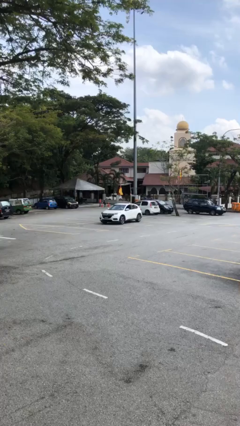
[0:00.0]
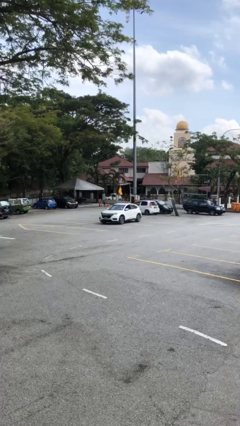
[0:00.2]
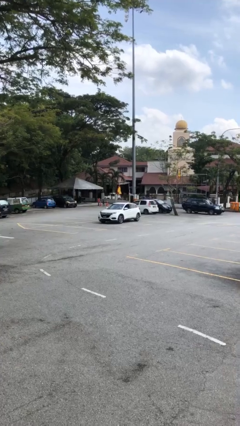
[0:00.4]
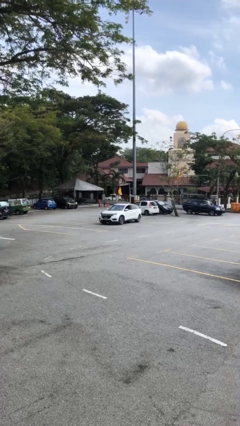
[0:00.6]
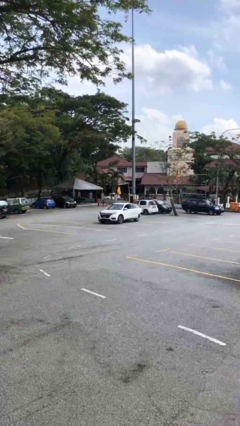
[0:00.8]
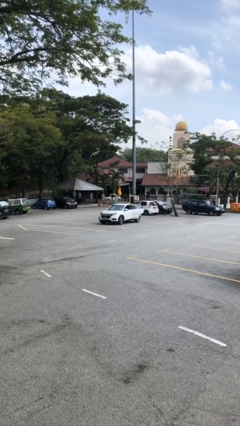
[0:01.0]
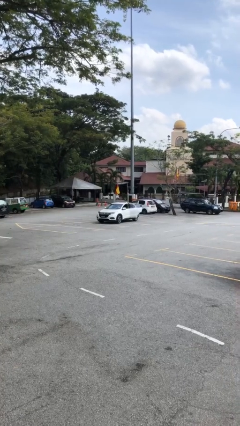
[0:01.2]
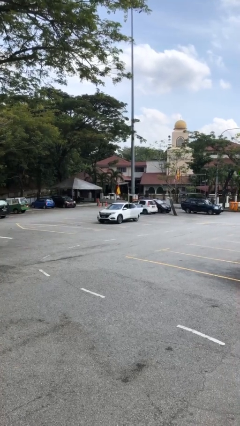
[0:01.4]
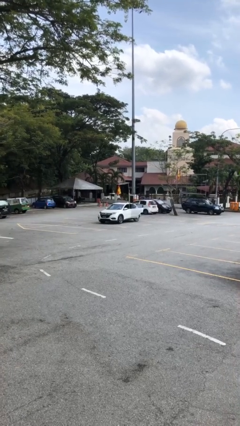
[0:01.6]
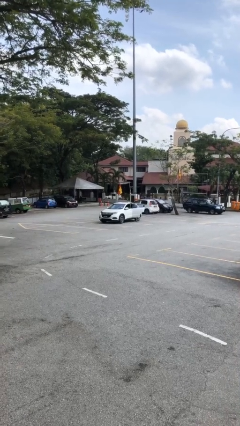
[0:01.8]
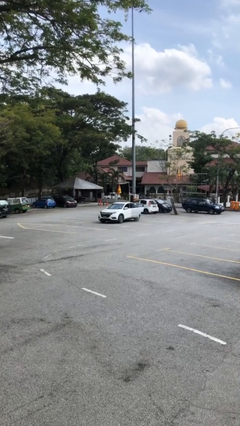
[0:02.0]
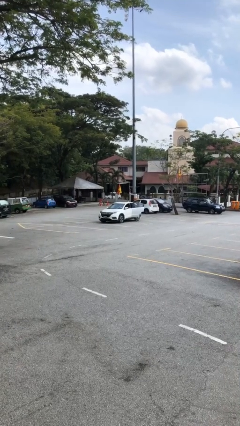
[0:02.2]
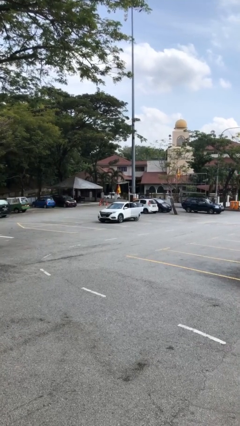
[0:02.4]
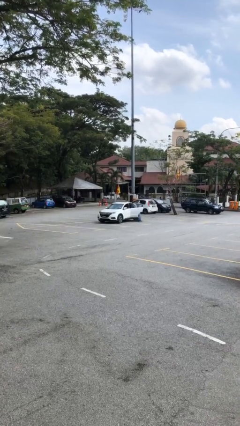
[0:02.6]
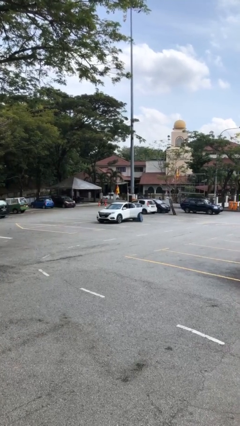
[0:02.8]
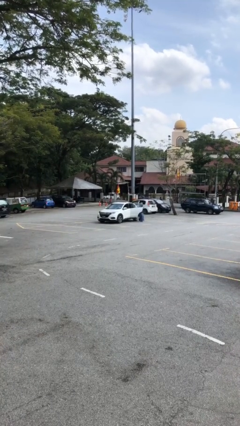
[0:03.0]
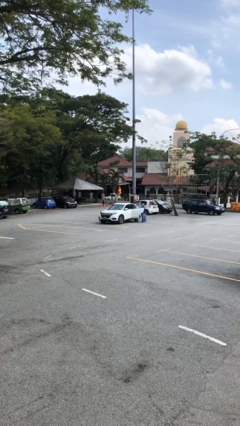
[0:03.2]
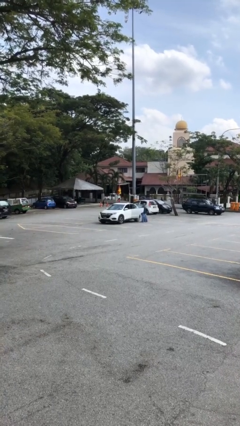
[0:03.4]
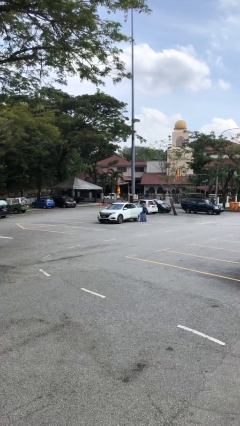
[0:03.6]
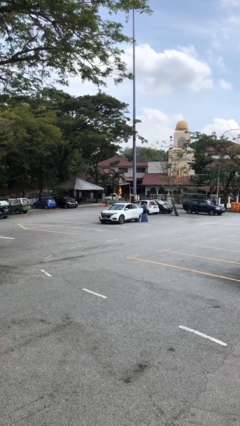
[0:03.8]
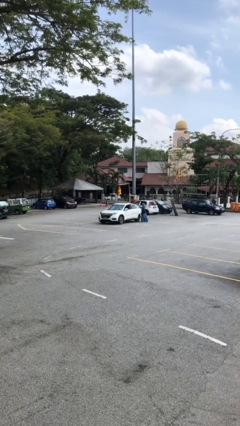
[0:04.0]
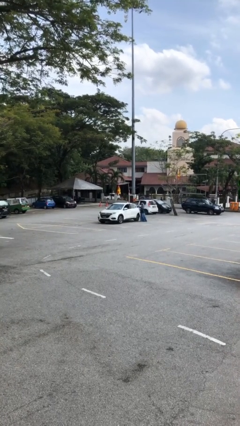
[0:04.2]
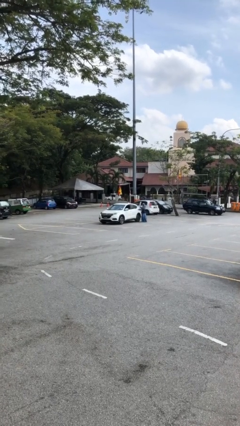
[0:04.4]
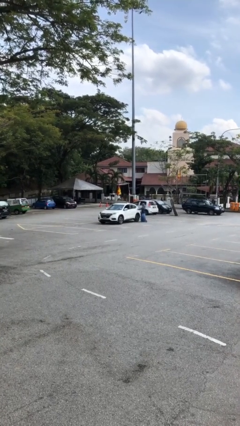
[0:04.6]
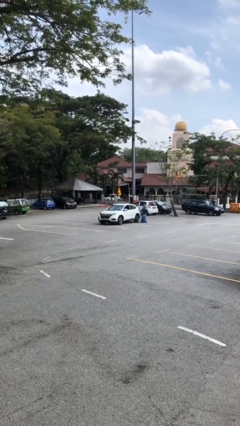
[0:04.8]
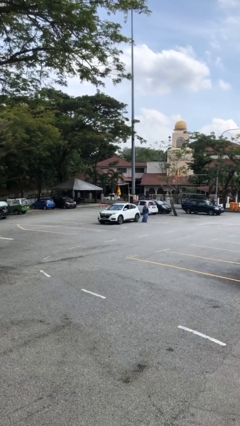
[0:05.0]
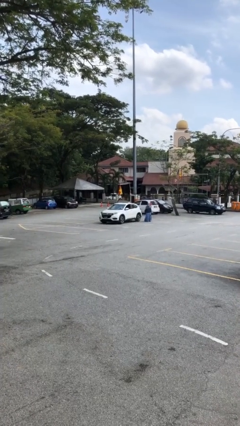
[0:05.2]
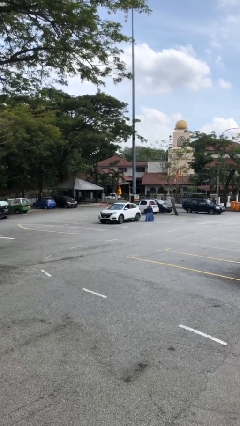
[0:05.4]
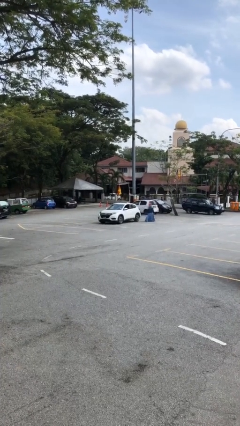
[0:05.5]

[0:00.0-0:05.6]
car drops off person

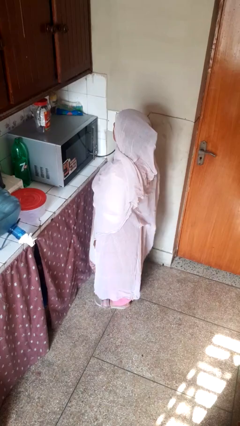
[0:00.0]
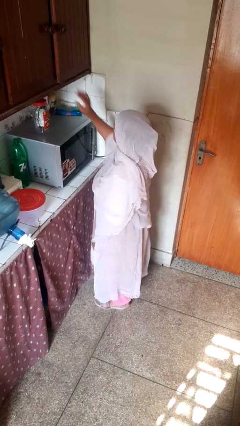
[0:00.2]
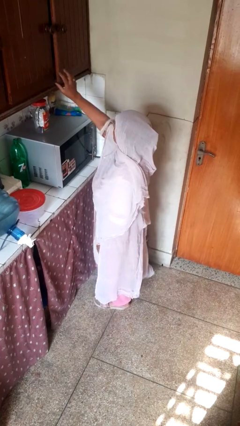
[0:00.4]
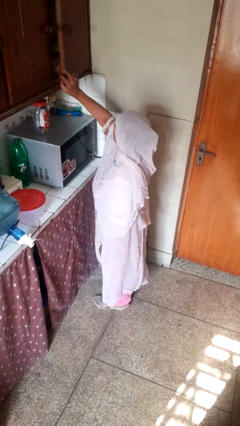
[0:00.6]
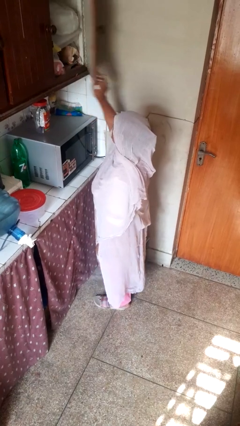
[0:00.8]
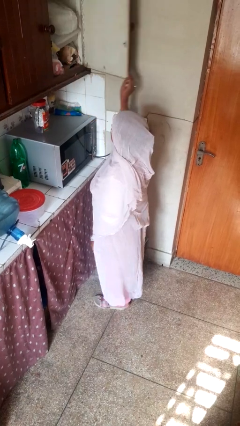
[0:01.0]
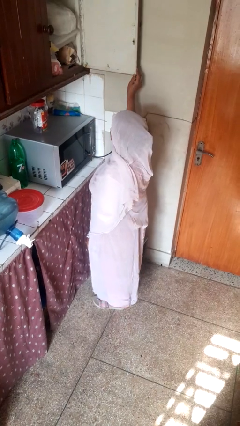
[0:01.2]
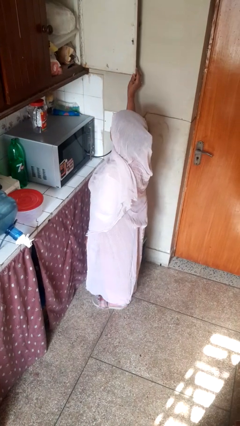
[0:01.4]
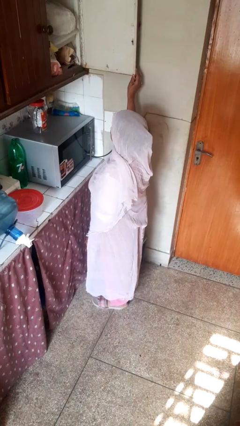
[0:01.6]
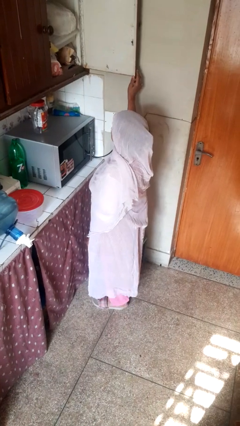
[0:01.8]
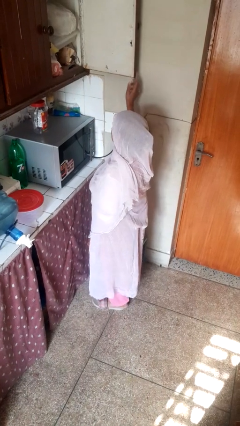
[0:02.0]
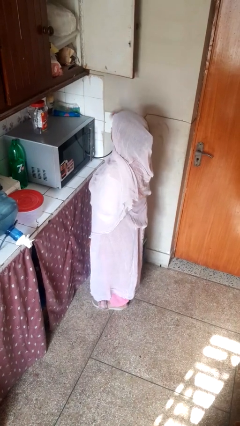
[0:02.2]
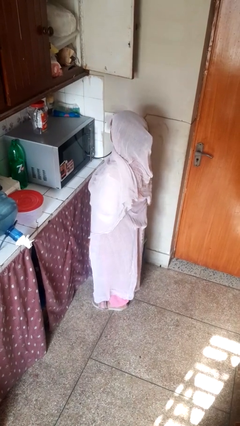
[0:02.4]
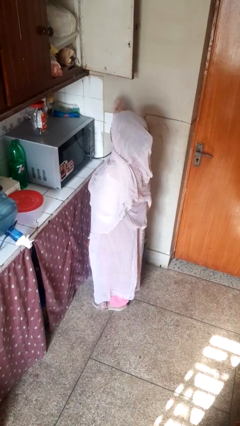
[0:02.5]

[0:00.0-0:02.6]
person opens cabinet

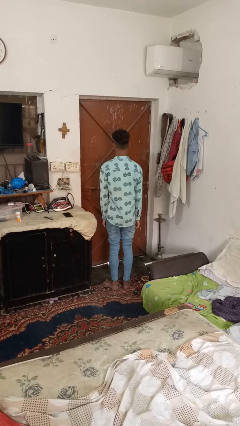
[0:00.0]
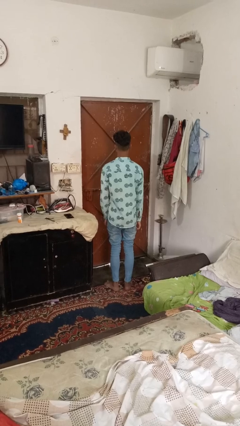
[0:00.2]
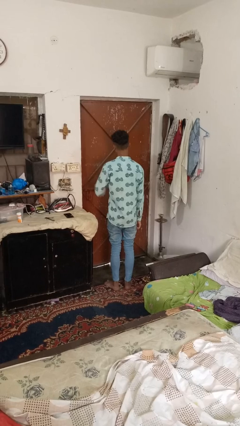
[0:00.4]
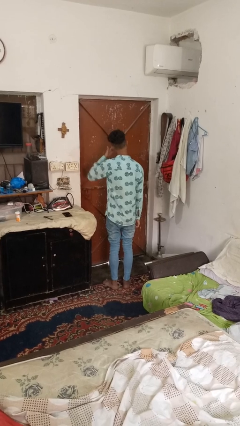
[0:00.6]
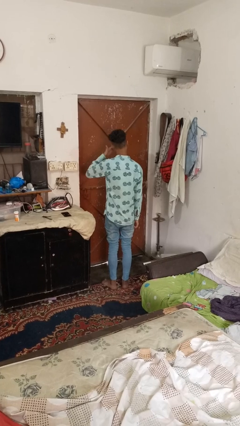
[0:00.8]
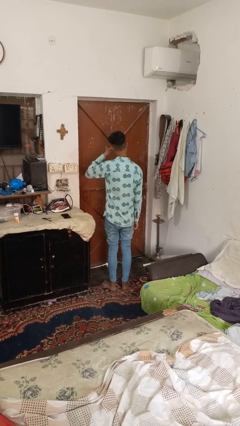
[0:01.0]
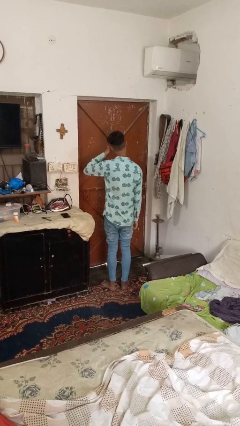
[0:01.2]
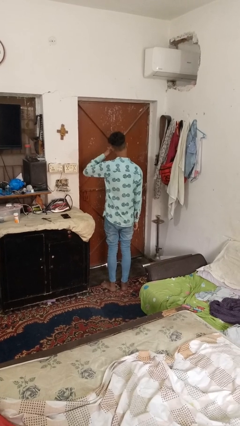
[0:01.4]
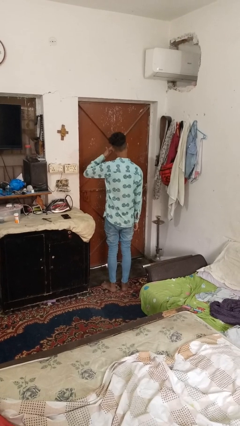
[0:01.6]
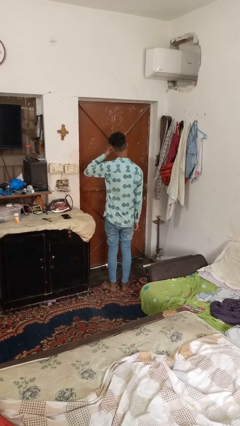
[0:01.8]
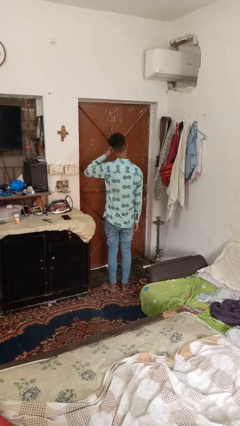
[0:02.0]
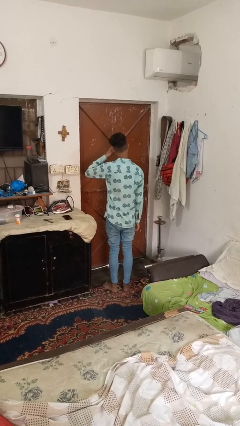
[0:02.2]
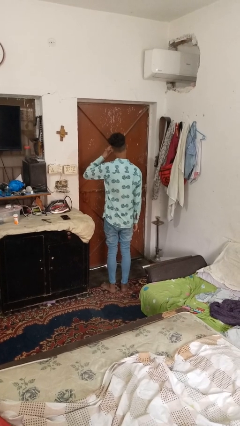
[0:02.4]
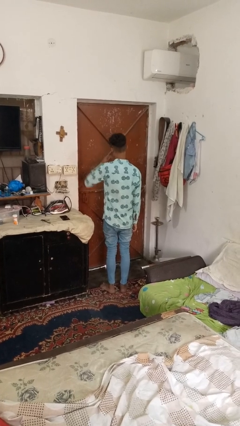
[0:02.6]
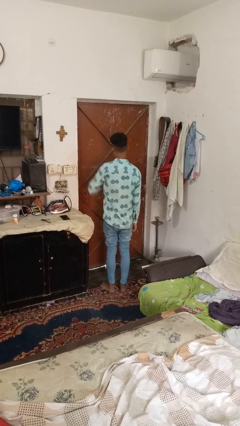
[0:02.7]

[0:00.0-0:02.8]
person rubs eyes

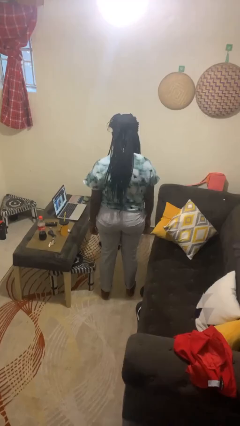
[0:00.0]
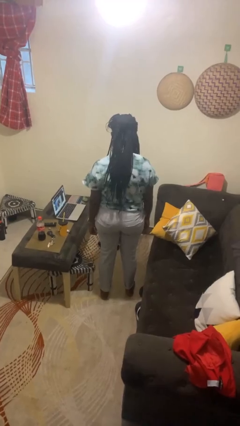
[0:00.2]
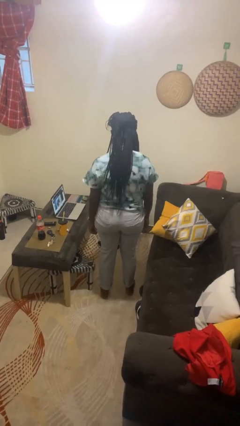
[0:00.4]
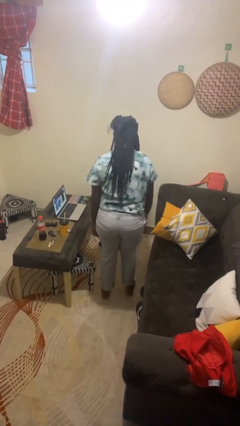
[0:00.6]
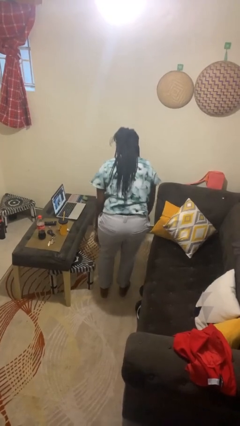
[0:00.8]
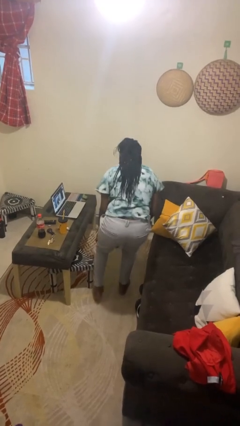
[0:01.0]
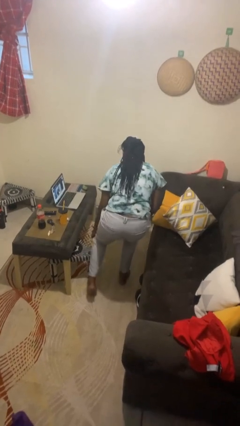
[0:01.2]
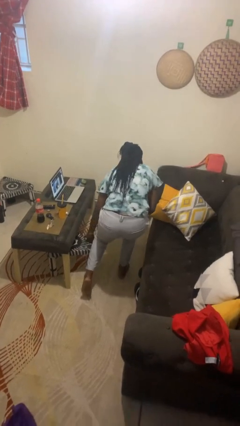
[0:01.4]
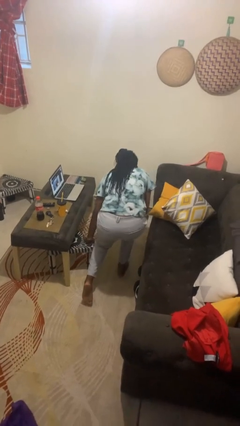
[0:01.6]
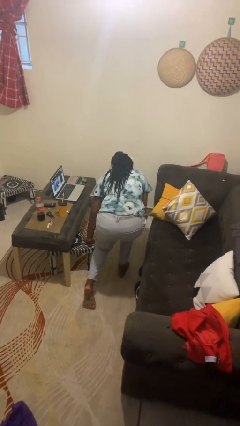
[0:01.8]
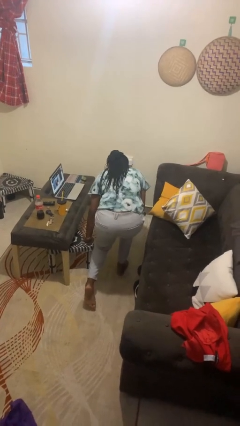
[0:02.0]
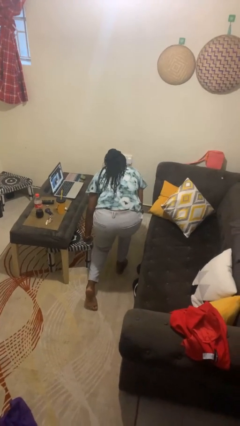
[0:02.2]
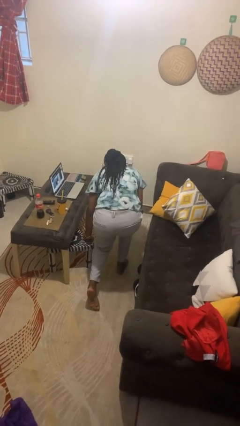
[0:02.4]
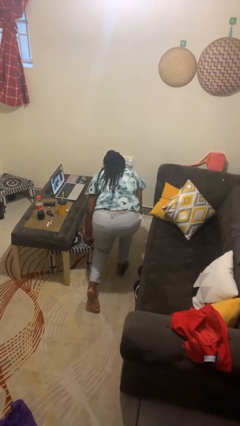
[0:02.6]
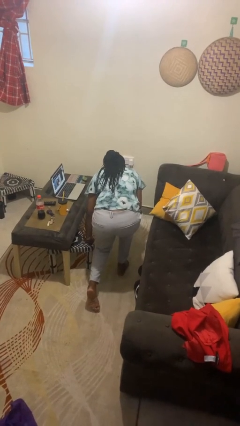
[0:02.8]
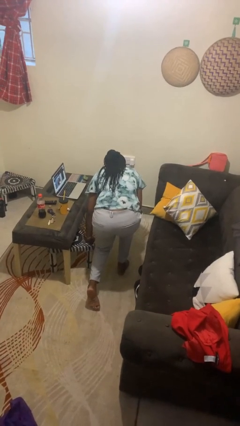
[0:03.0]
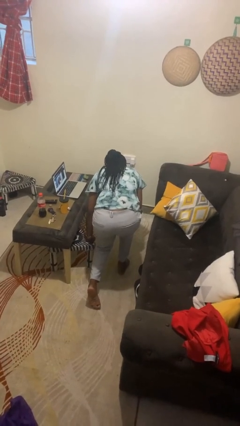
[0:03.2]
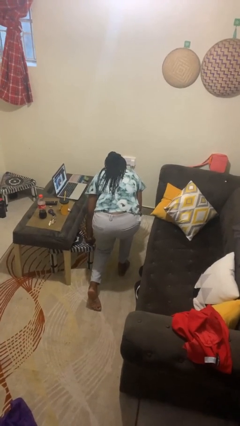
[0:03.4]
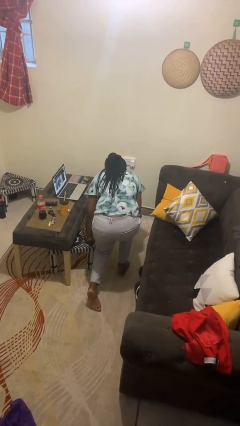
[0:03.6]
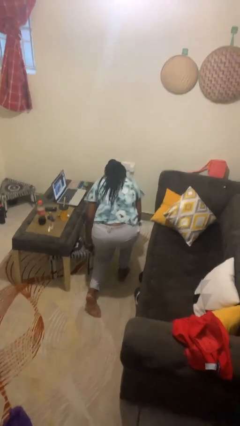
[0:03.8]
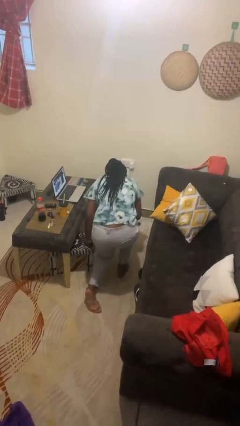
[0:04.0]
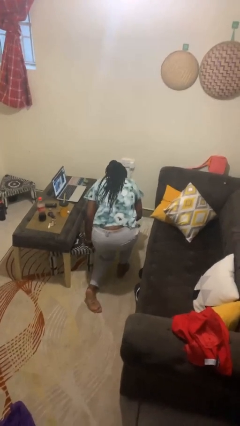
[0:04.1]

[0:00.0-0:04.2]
person trips on object on floor

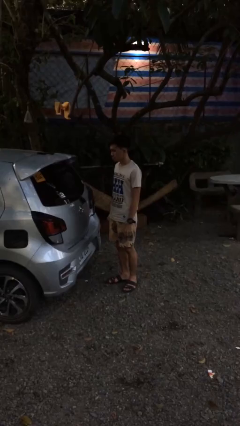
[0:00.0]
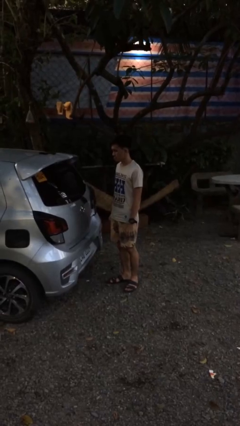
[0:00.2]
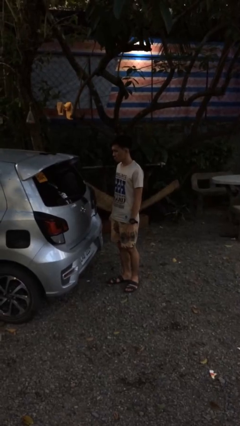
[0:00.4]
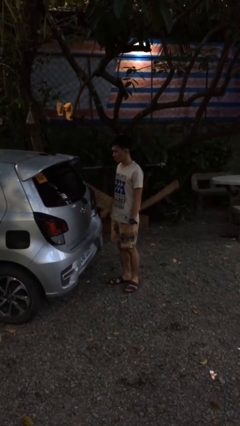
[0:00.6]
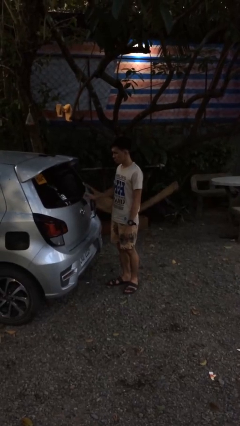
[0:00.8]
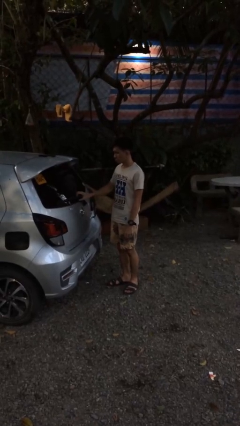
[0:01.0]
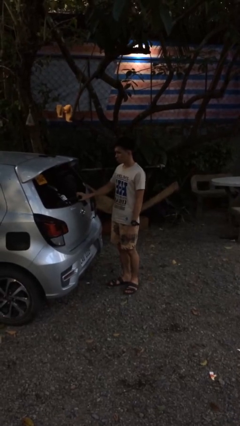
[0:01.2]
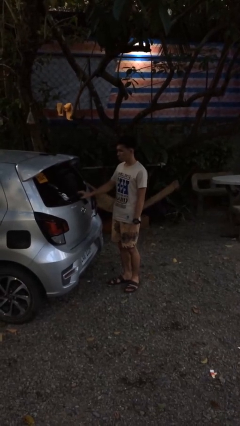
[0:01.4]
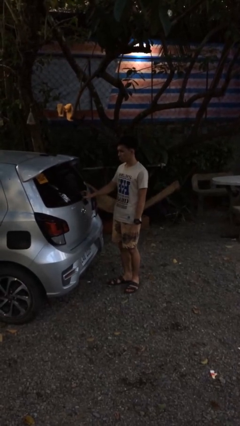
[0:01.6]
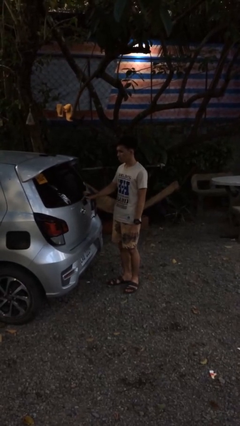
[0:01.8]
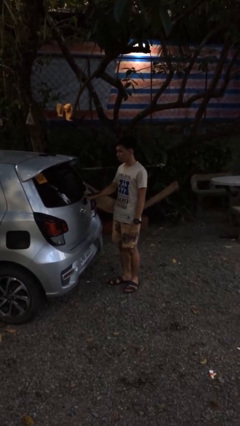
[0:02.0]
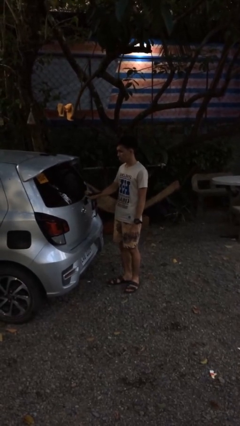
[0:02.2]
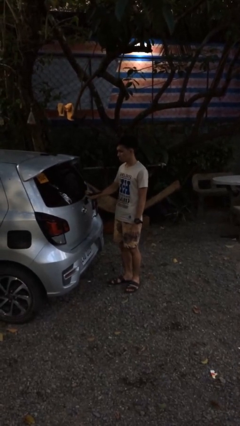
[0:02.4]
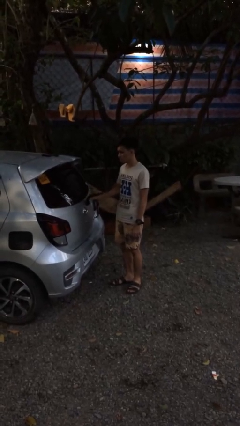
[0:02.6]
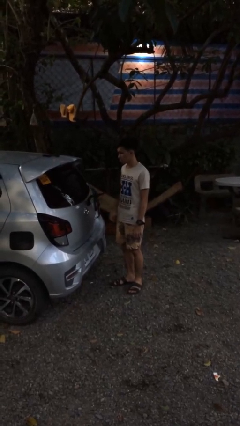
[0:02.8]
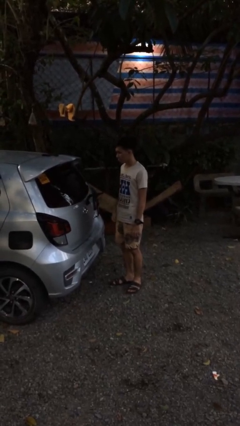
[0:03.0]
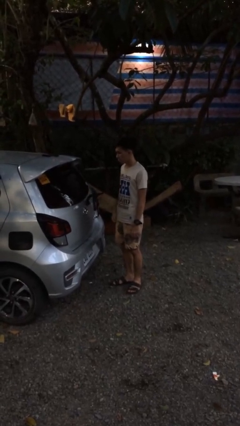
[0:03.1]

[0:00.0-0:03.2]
person flips up car wipers
